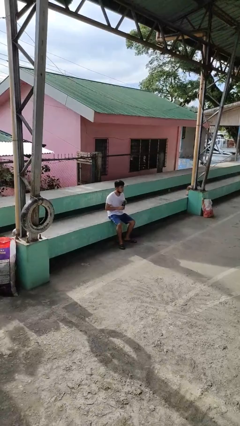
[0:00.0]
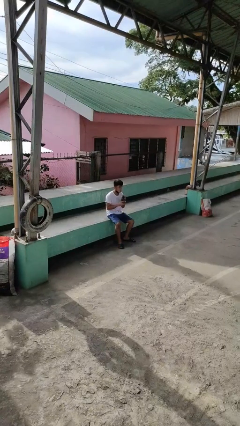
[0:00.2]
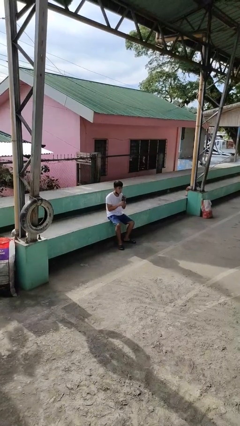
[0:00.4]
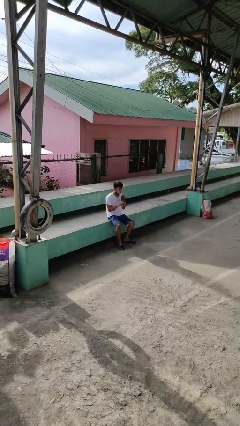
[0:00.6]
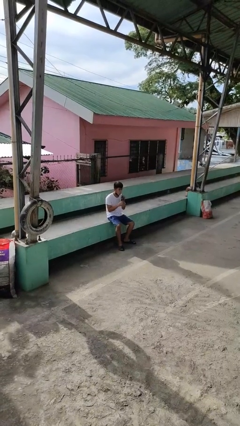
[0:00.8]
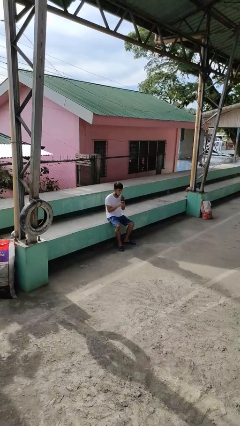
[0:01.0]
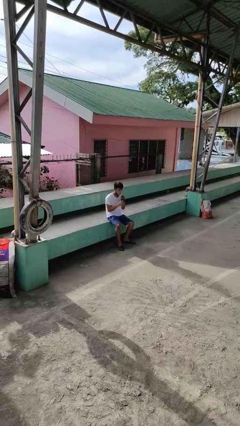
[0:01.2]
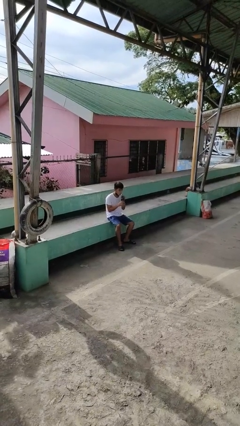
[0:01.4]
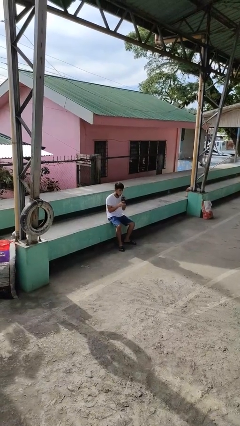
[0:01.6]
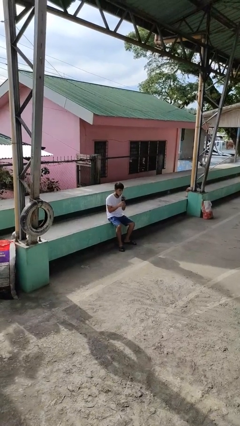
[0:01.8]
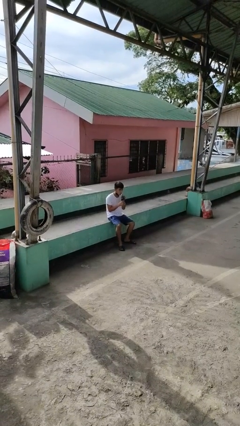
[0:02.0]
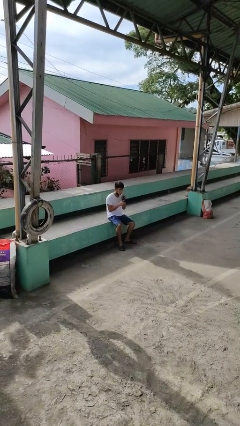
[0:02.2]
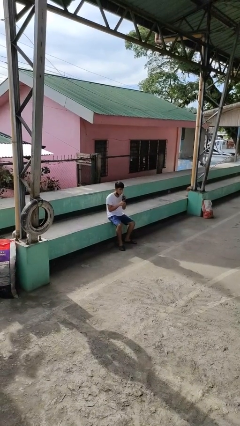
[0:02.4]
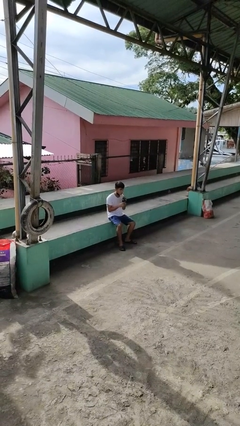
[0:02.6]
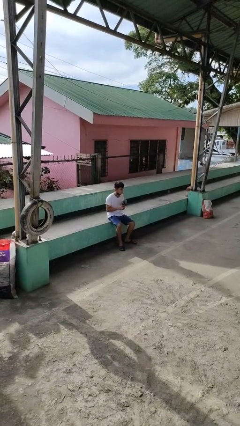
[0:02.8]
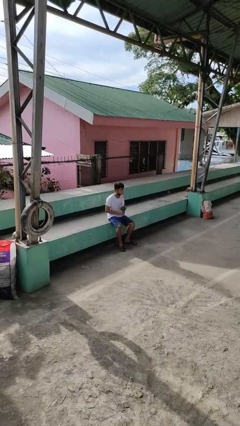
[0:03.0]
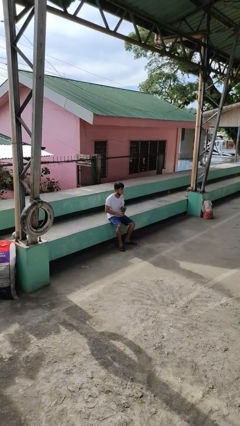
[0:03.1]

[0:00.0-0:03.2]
person drinks from straw

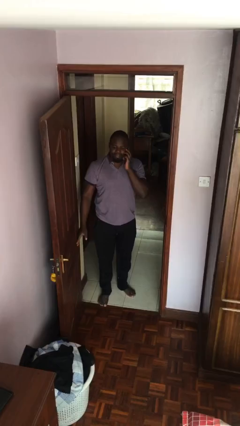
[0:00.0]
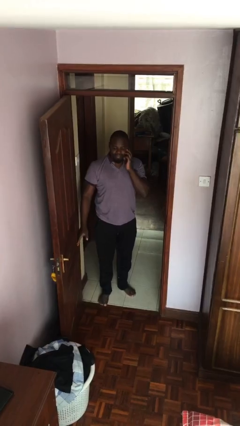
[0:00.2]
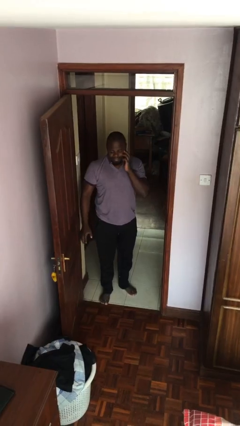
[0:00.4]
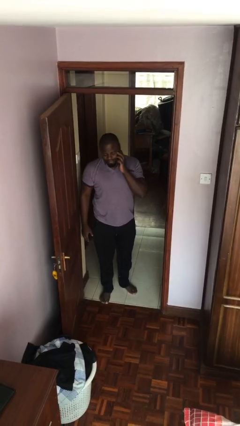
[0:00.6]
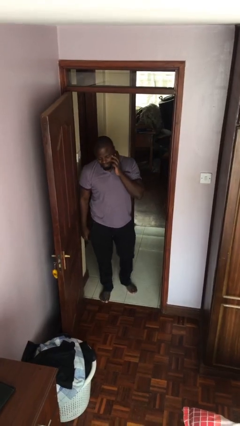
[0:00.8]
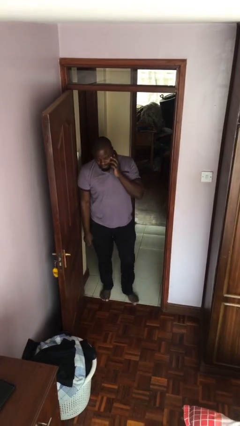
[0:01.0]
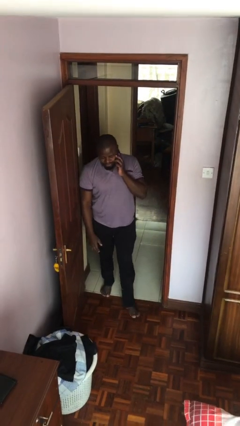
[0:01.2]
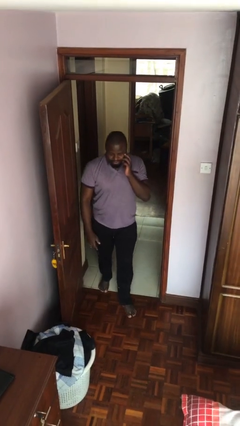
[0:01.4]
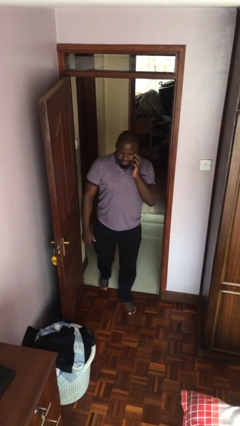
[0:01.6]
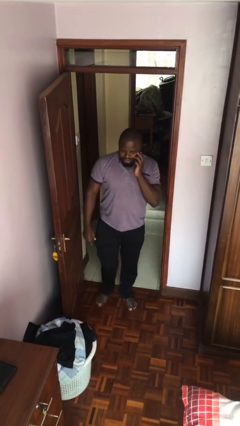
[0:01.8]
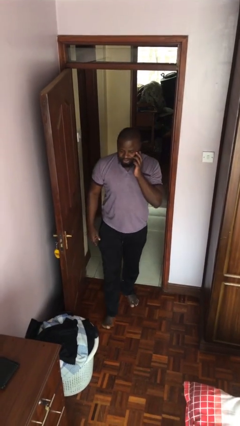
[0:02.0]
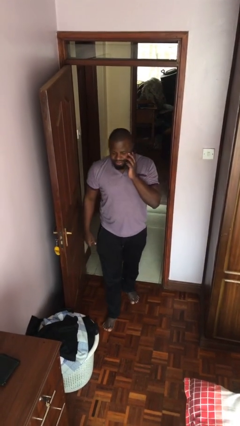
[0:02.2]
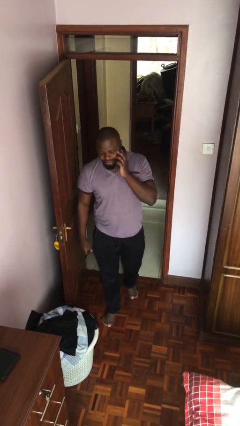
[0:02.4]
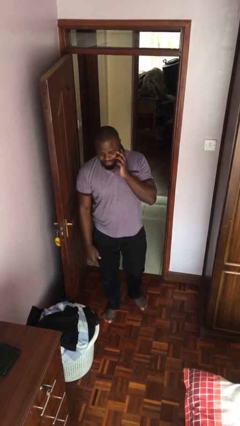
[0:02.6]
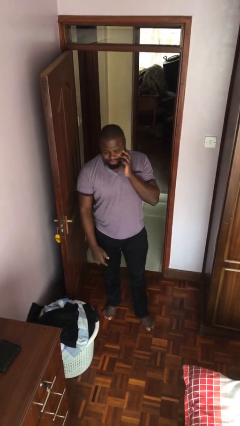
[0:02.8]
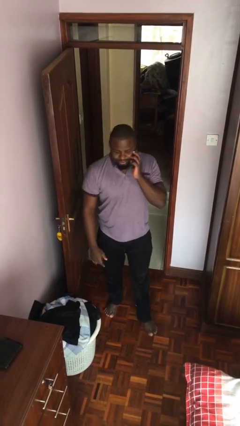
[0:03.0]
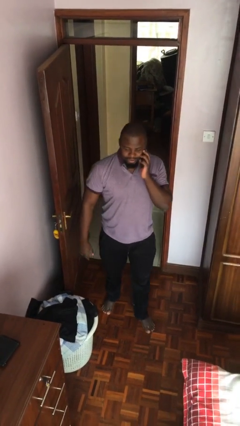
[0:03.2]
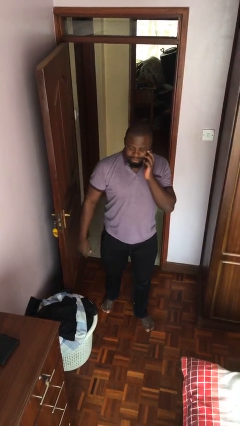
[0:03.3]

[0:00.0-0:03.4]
person enters scene through structure

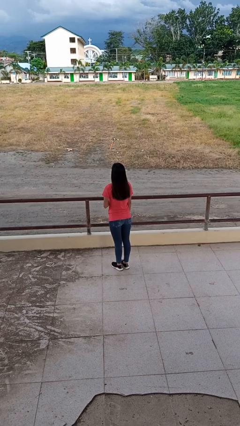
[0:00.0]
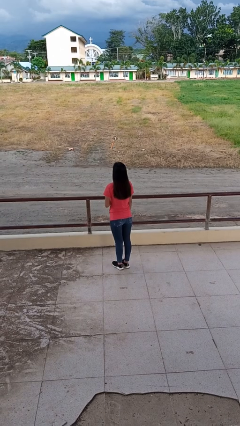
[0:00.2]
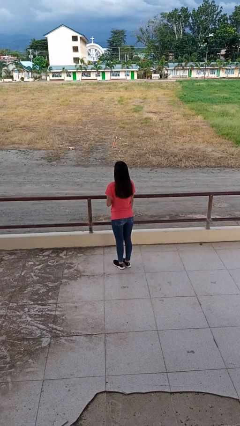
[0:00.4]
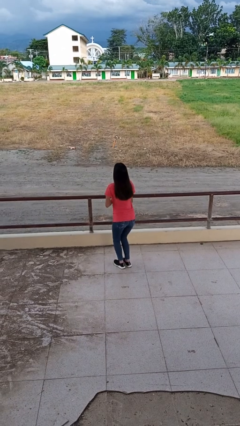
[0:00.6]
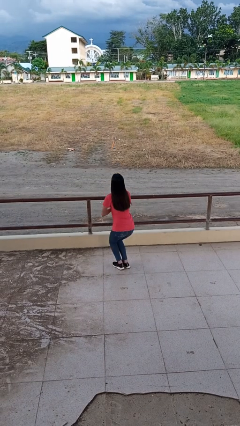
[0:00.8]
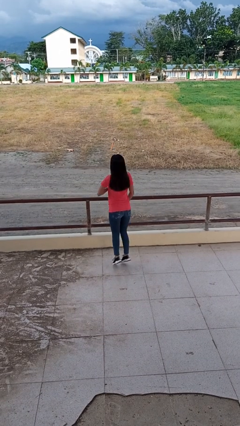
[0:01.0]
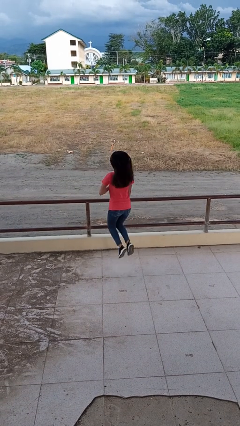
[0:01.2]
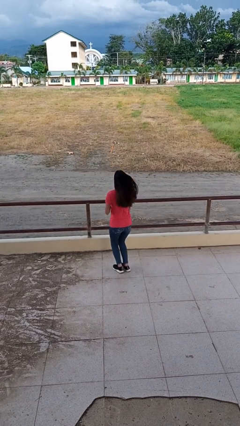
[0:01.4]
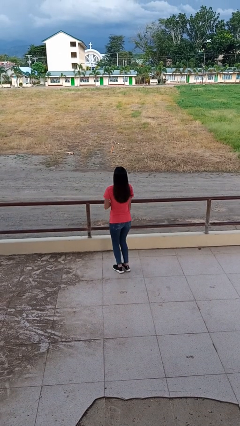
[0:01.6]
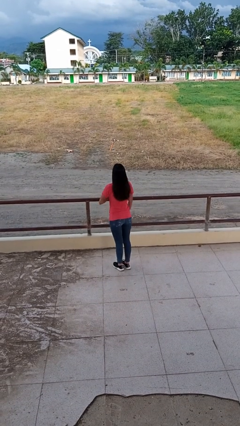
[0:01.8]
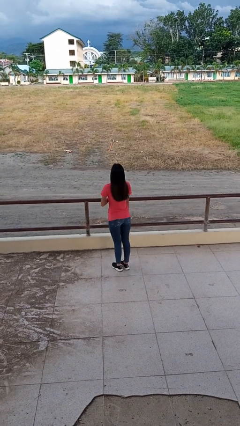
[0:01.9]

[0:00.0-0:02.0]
person jumps

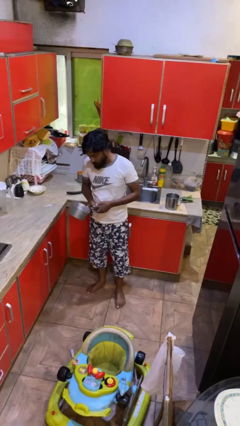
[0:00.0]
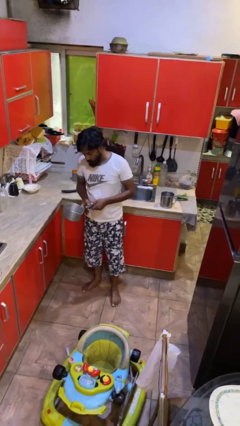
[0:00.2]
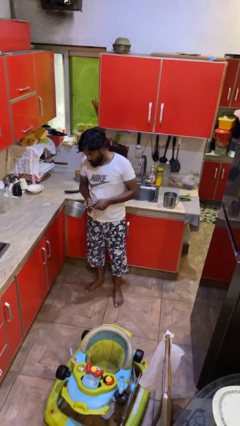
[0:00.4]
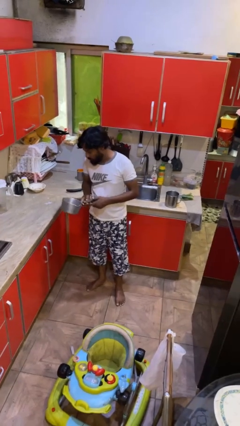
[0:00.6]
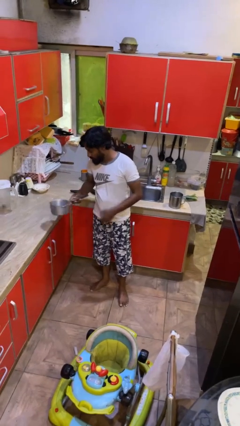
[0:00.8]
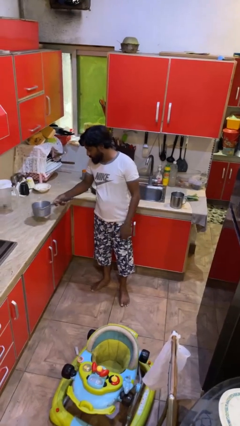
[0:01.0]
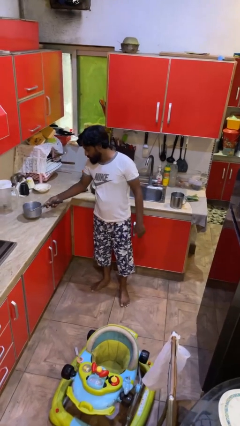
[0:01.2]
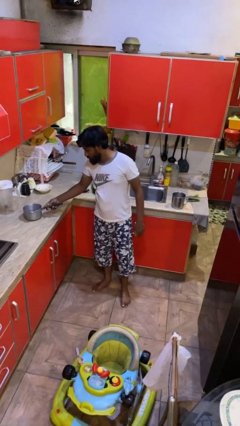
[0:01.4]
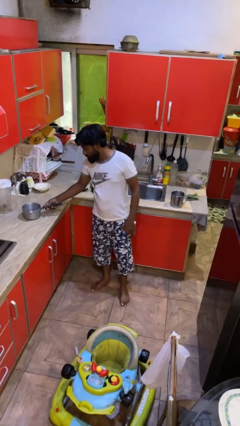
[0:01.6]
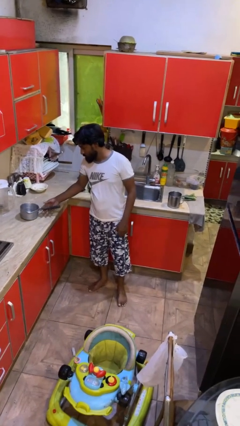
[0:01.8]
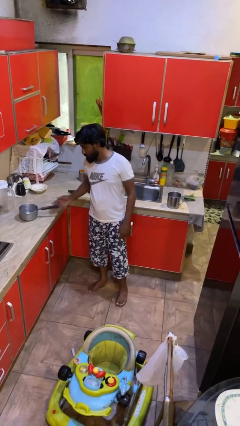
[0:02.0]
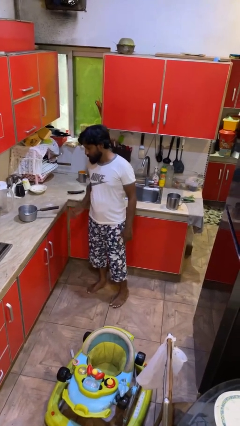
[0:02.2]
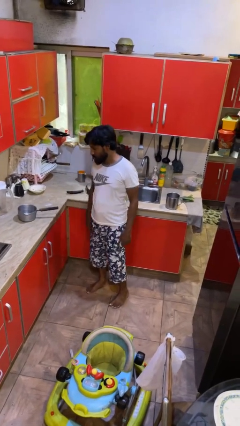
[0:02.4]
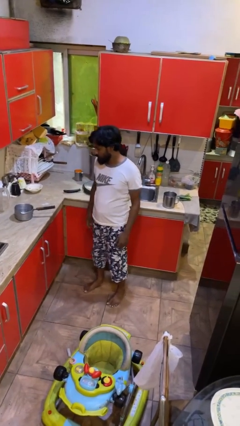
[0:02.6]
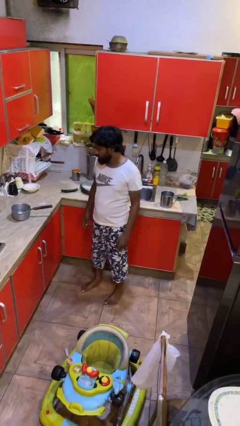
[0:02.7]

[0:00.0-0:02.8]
person puts down object on countertop

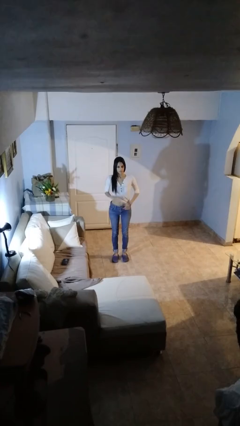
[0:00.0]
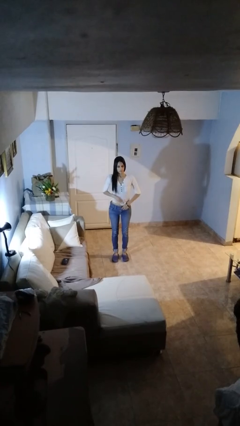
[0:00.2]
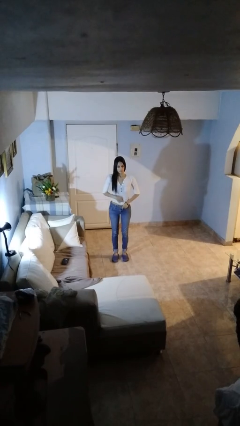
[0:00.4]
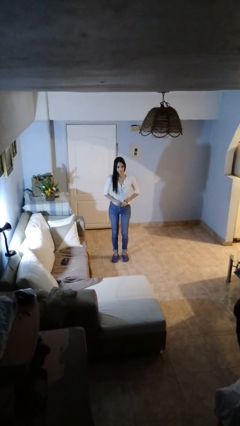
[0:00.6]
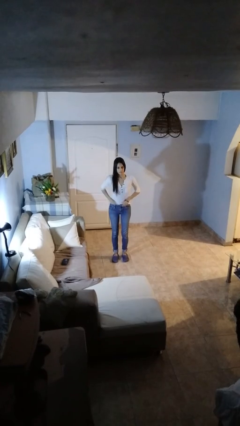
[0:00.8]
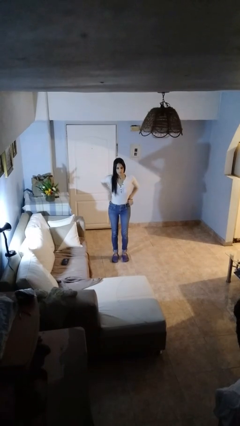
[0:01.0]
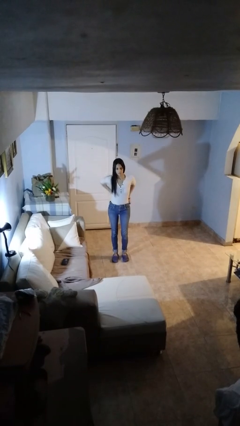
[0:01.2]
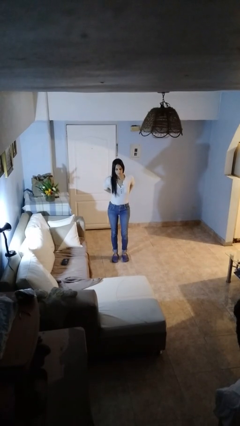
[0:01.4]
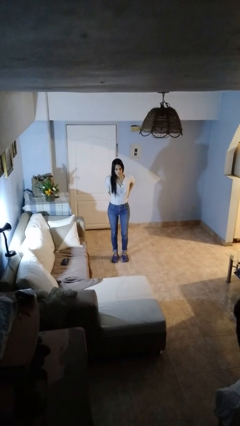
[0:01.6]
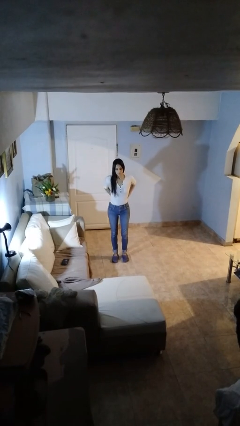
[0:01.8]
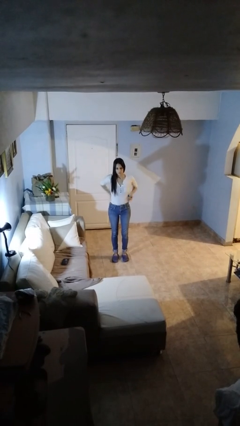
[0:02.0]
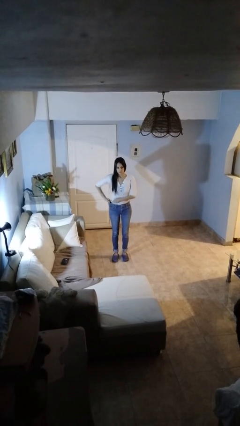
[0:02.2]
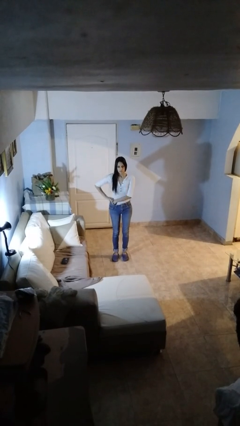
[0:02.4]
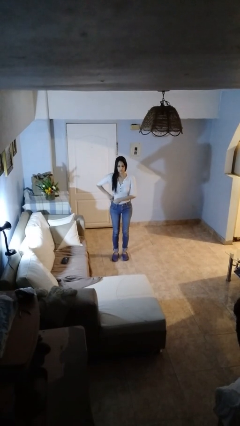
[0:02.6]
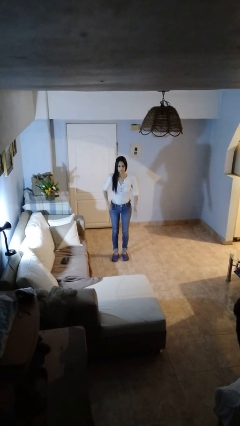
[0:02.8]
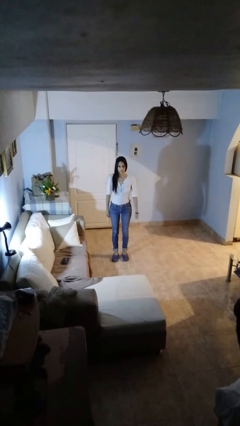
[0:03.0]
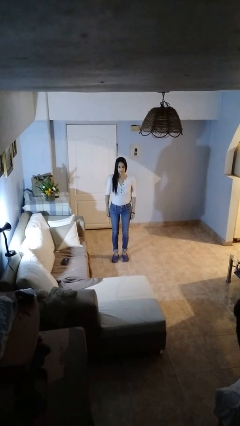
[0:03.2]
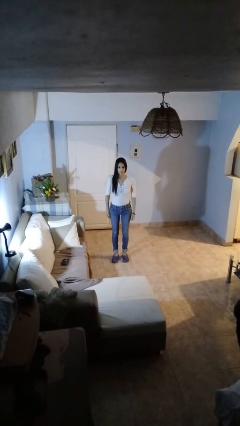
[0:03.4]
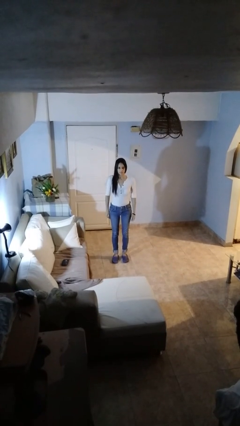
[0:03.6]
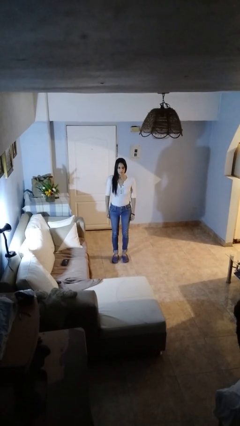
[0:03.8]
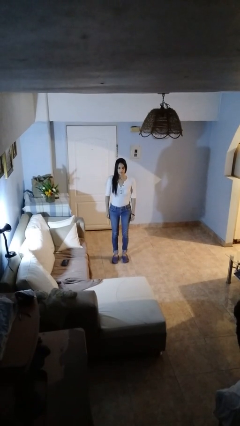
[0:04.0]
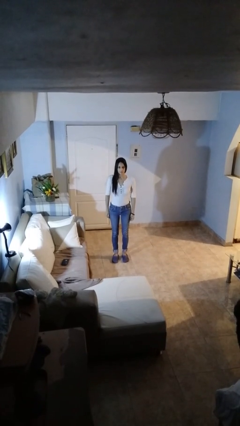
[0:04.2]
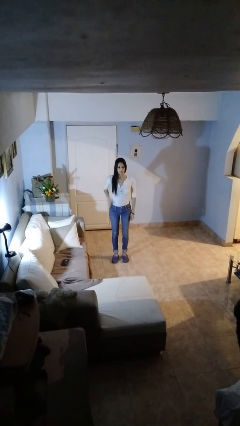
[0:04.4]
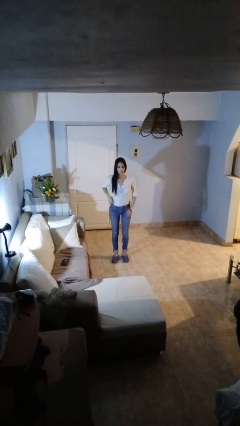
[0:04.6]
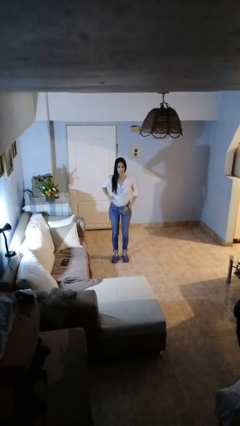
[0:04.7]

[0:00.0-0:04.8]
person tucks in shirt

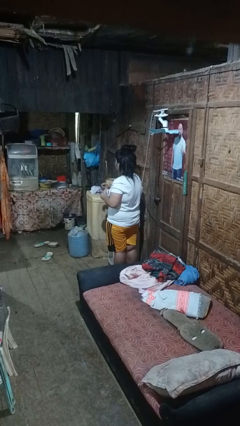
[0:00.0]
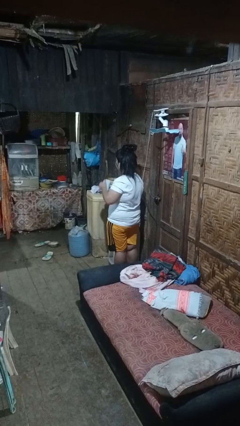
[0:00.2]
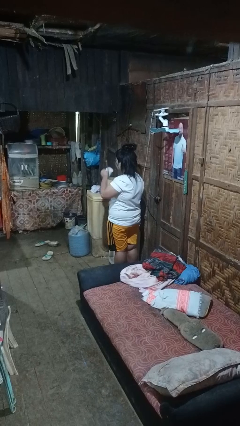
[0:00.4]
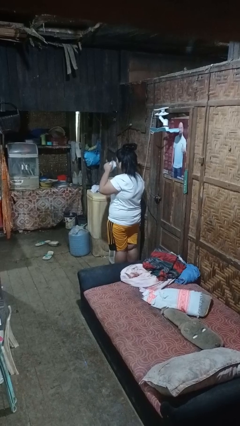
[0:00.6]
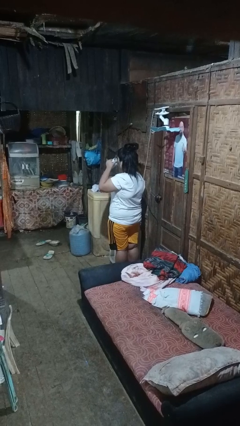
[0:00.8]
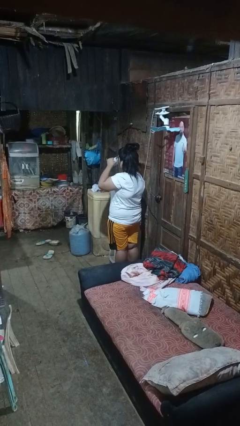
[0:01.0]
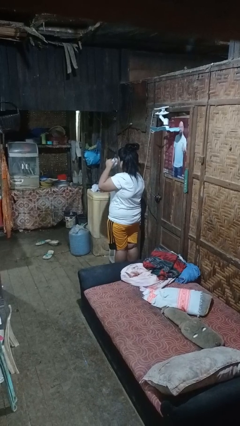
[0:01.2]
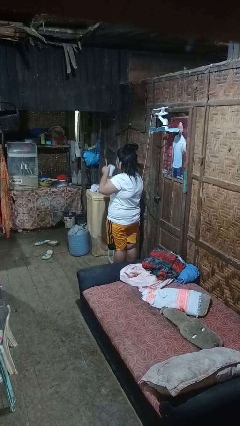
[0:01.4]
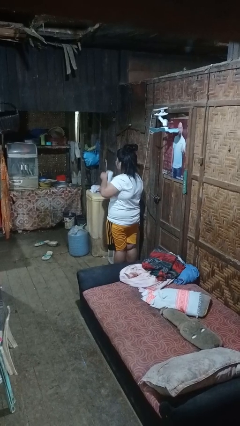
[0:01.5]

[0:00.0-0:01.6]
person drinks from mug
